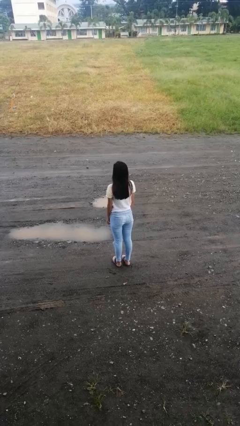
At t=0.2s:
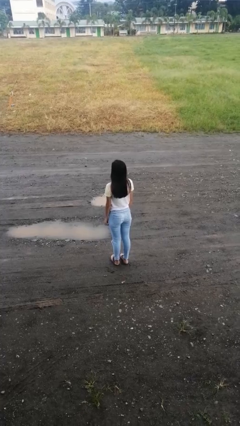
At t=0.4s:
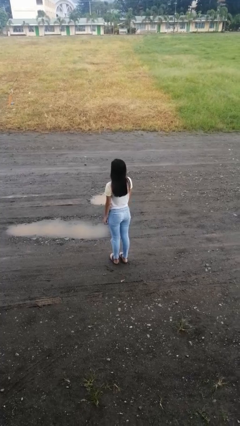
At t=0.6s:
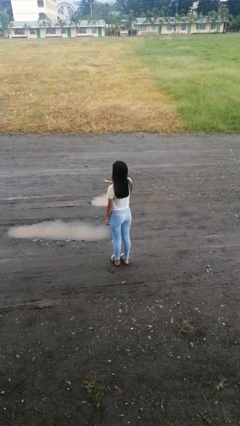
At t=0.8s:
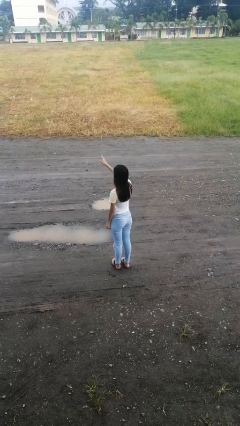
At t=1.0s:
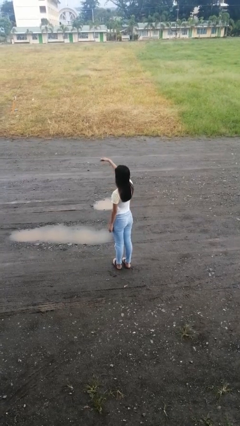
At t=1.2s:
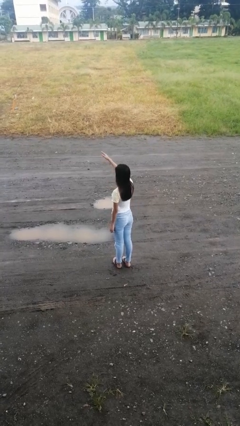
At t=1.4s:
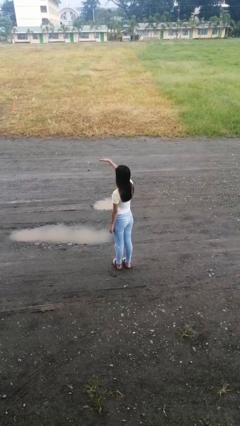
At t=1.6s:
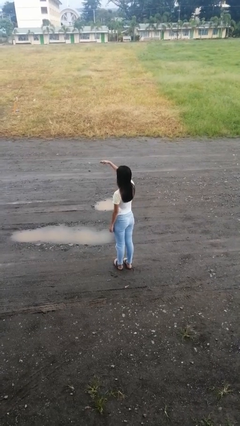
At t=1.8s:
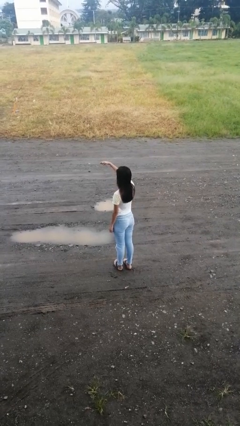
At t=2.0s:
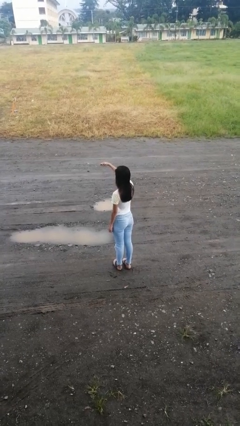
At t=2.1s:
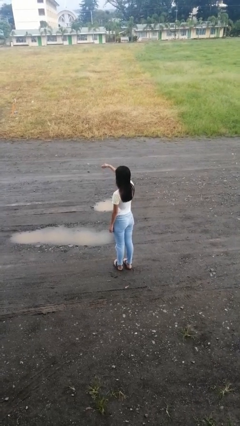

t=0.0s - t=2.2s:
person gestures come here

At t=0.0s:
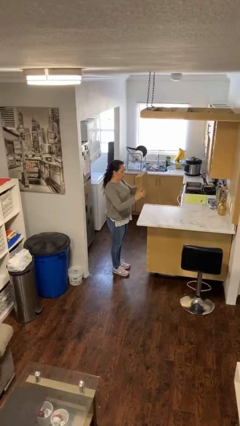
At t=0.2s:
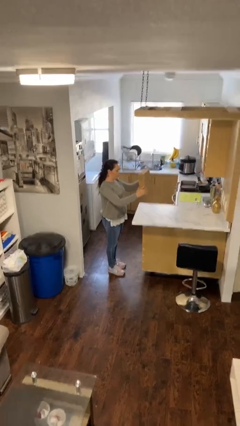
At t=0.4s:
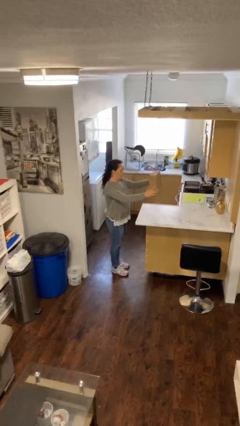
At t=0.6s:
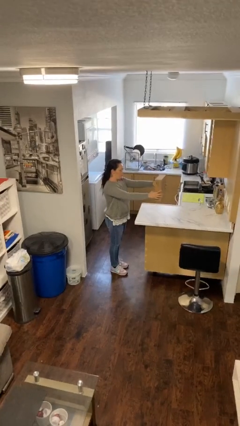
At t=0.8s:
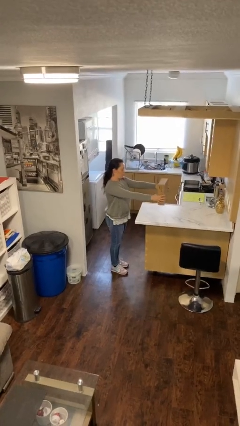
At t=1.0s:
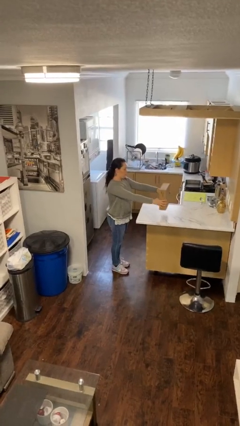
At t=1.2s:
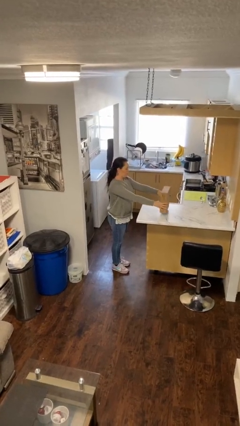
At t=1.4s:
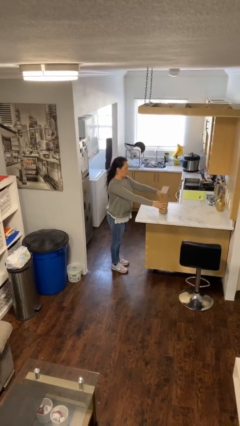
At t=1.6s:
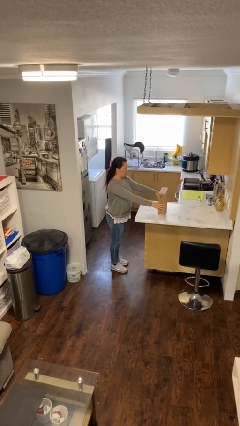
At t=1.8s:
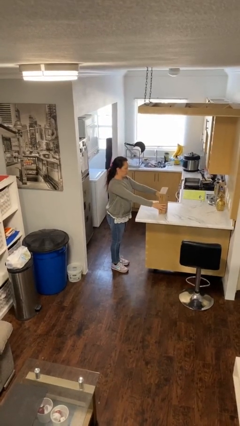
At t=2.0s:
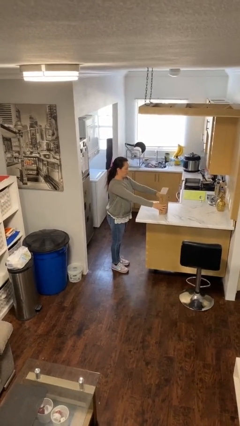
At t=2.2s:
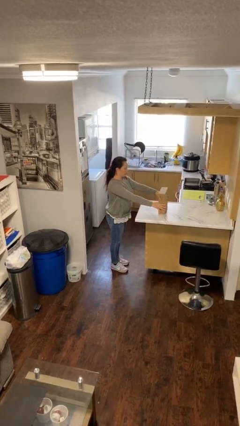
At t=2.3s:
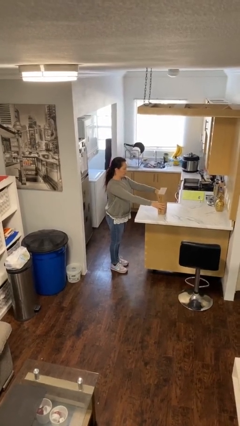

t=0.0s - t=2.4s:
person puts down object on table

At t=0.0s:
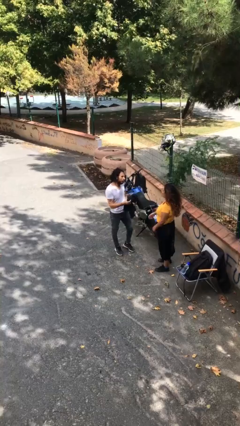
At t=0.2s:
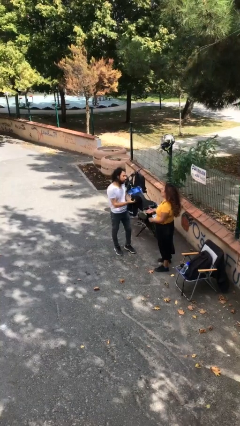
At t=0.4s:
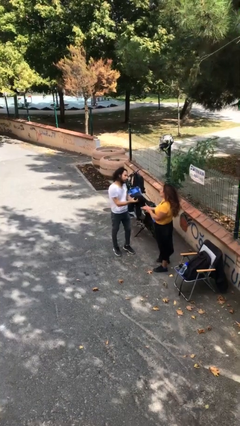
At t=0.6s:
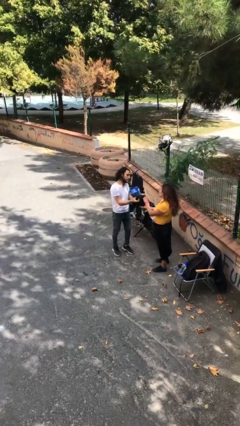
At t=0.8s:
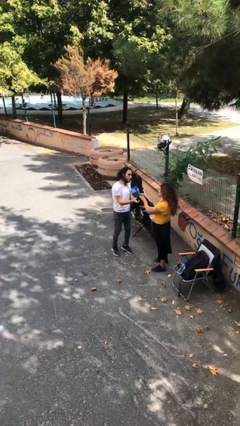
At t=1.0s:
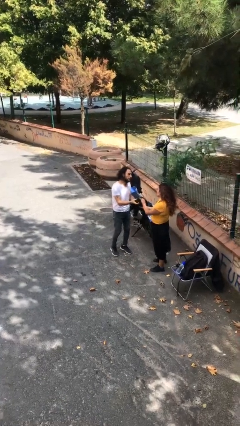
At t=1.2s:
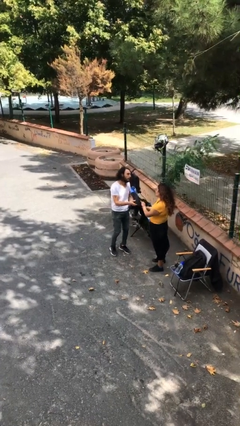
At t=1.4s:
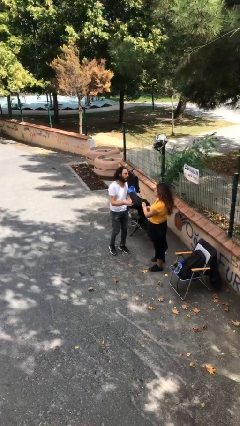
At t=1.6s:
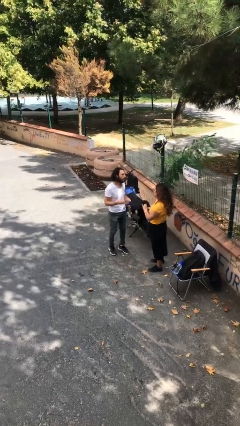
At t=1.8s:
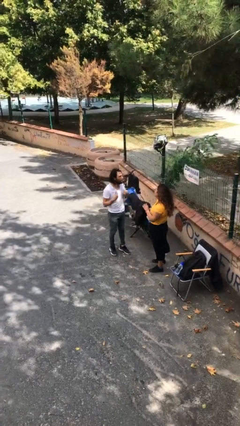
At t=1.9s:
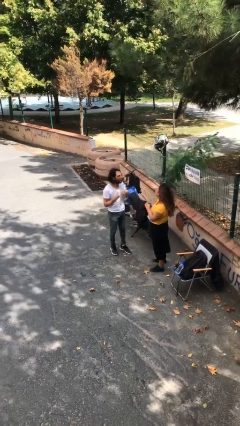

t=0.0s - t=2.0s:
person transfers object to person

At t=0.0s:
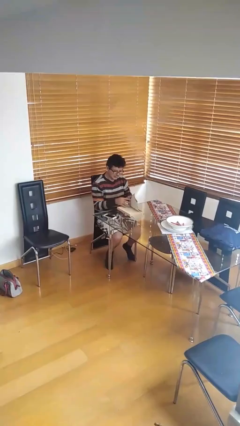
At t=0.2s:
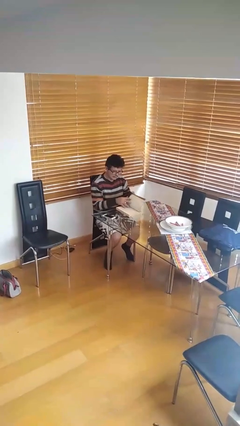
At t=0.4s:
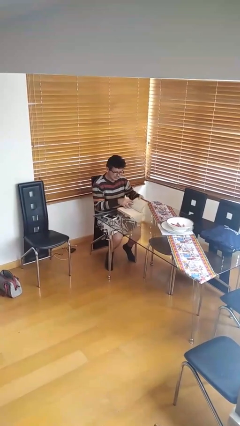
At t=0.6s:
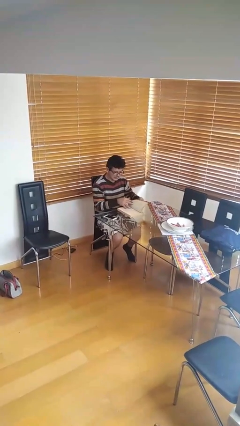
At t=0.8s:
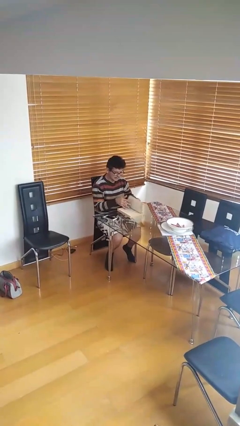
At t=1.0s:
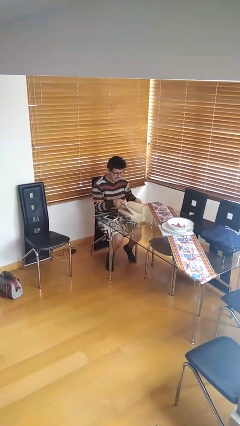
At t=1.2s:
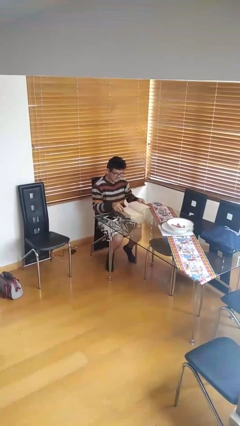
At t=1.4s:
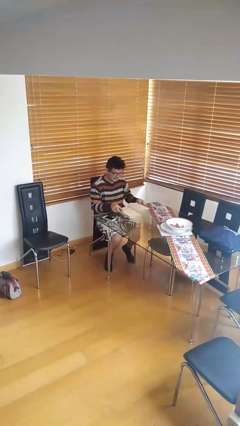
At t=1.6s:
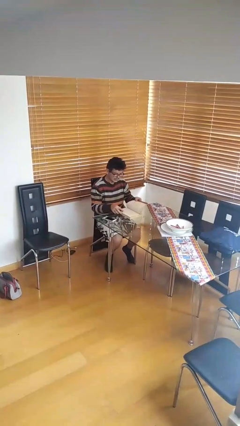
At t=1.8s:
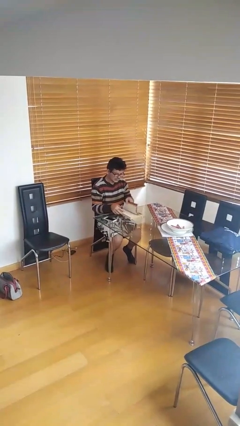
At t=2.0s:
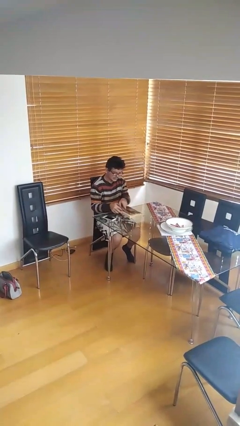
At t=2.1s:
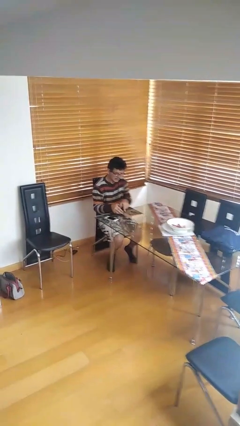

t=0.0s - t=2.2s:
person reads document

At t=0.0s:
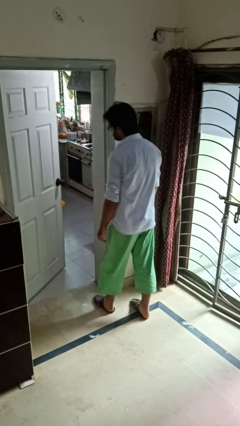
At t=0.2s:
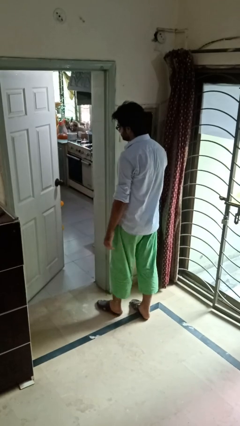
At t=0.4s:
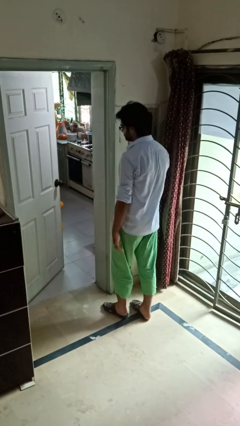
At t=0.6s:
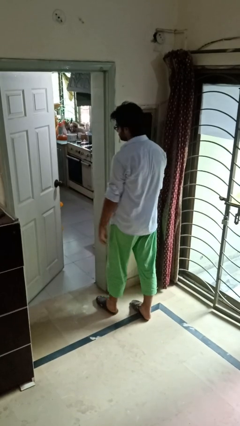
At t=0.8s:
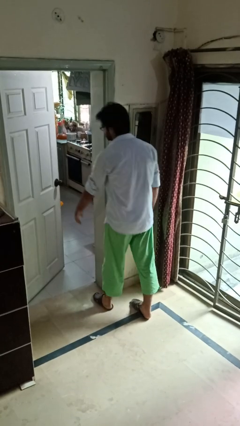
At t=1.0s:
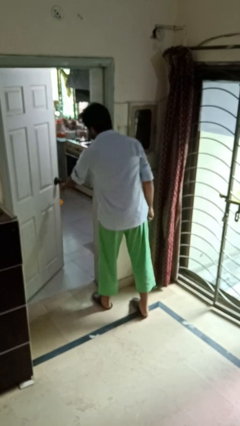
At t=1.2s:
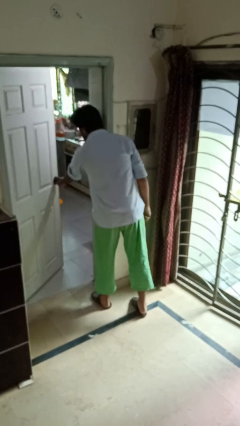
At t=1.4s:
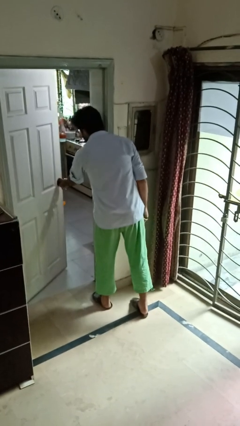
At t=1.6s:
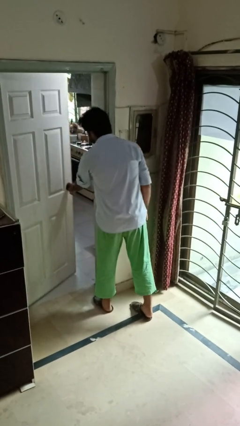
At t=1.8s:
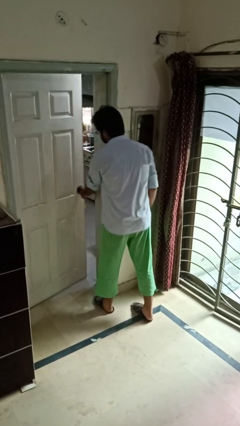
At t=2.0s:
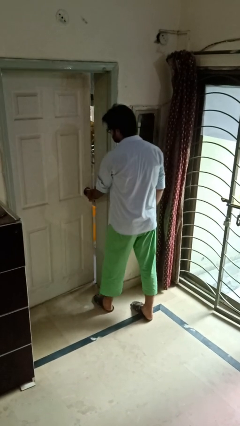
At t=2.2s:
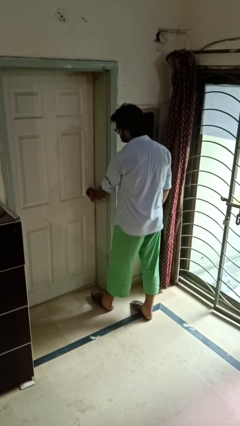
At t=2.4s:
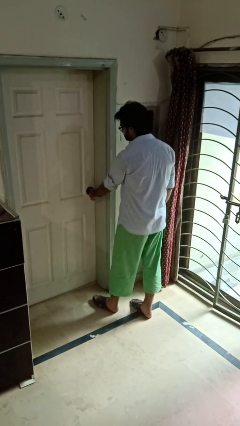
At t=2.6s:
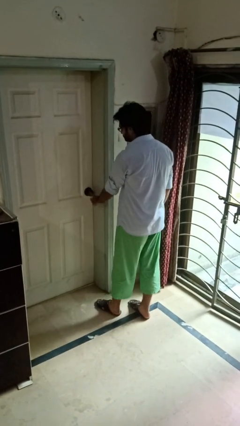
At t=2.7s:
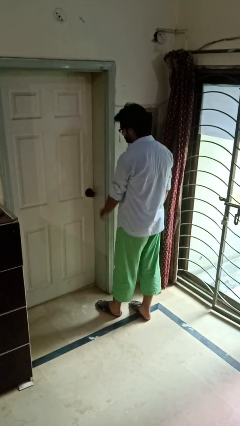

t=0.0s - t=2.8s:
person closes facility door

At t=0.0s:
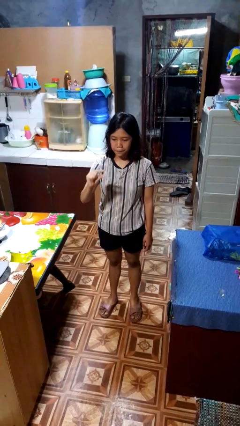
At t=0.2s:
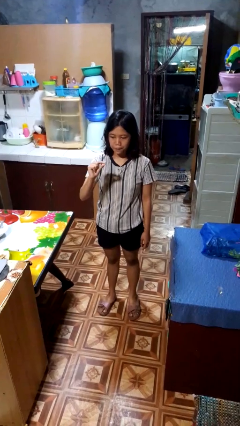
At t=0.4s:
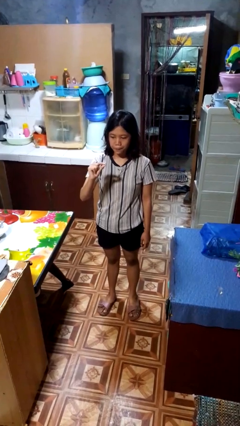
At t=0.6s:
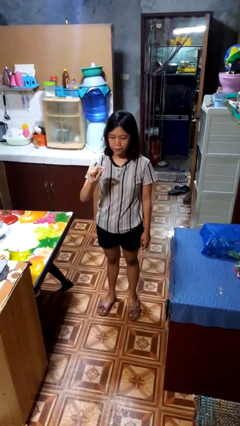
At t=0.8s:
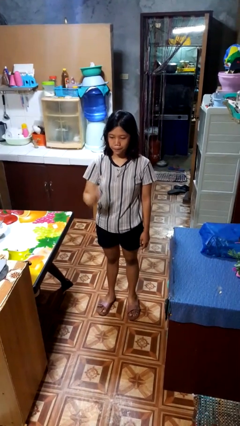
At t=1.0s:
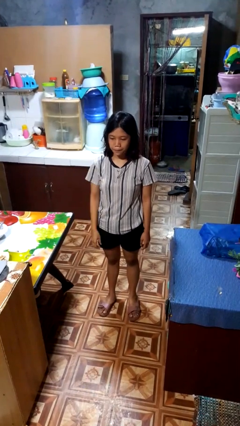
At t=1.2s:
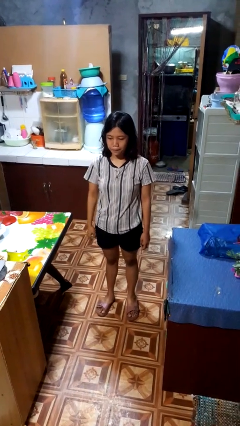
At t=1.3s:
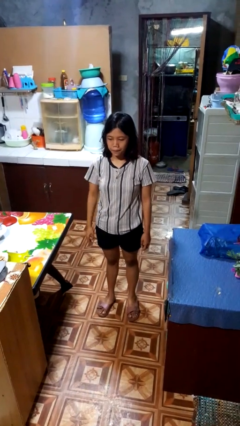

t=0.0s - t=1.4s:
person gestures zoom out

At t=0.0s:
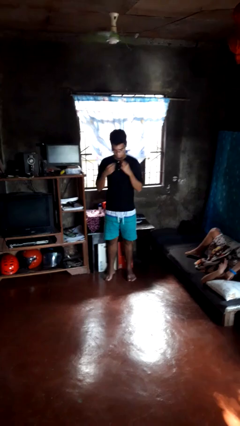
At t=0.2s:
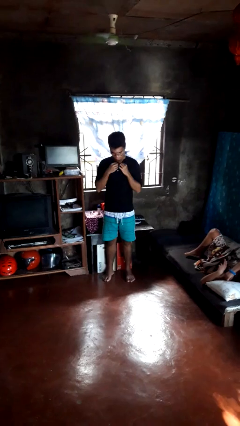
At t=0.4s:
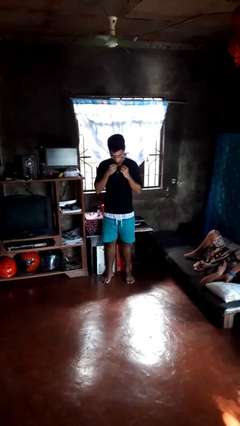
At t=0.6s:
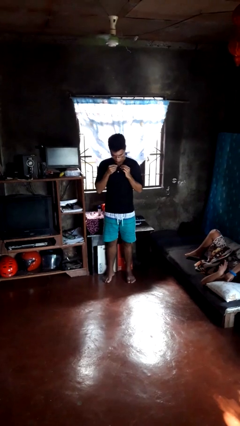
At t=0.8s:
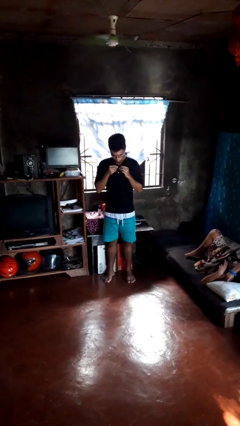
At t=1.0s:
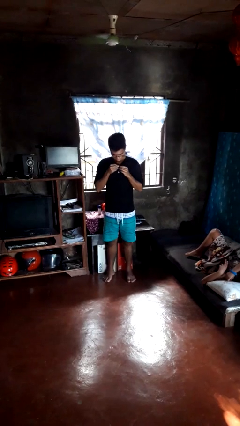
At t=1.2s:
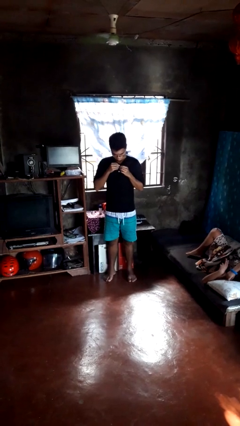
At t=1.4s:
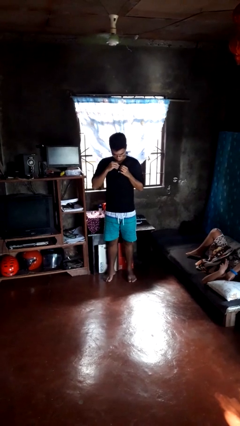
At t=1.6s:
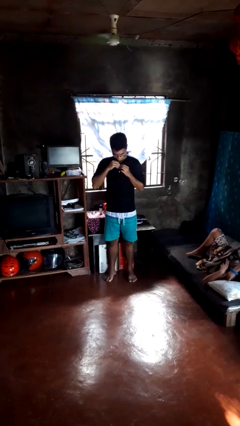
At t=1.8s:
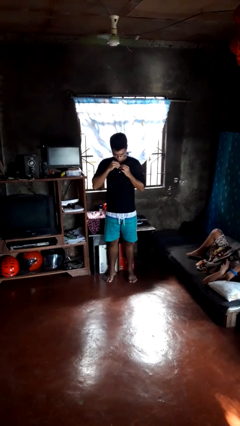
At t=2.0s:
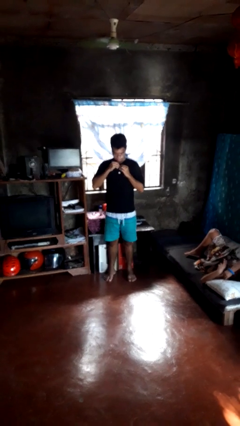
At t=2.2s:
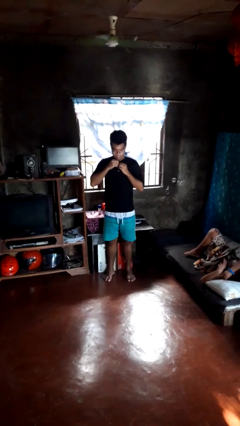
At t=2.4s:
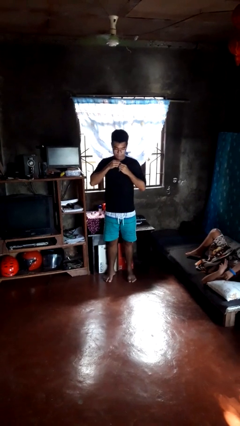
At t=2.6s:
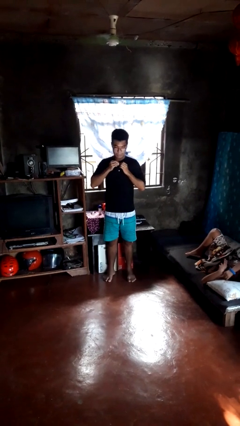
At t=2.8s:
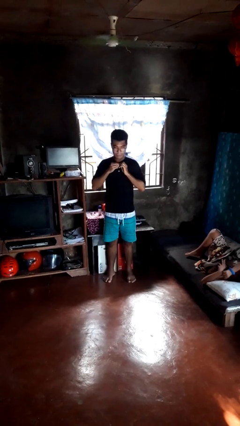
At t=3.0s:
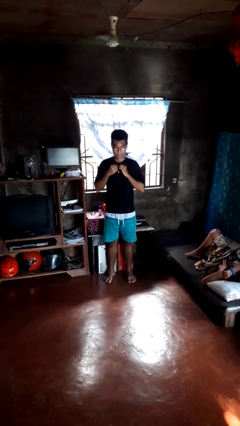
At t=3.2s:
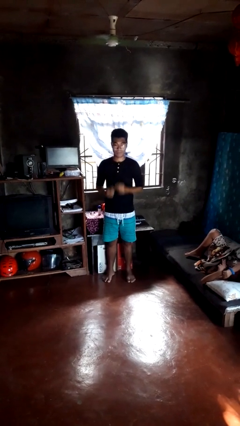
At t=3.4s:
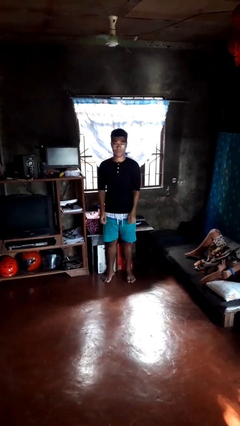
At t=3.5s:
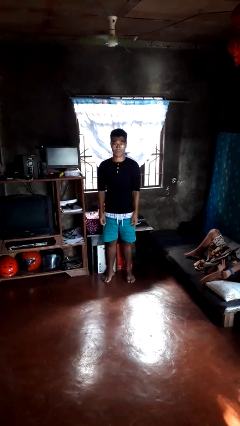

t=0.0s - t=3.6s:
person buttons shirt

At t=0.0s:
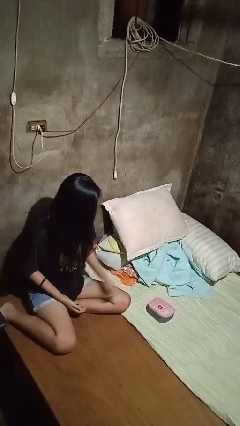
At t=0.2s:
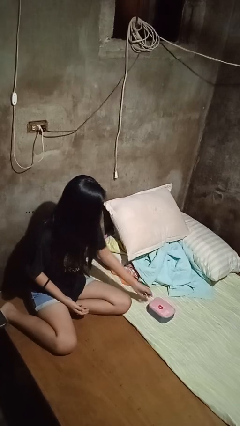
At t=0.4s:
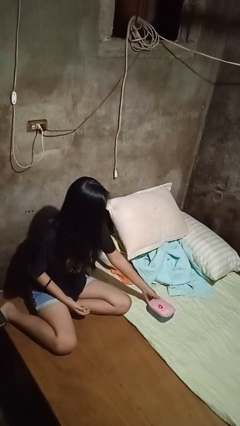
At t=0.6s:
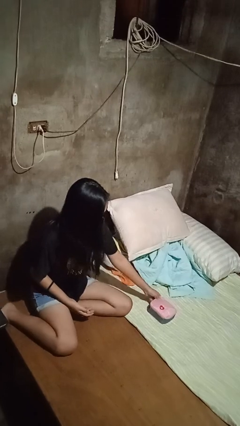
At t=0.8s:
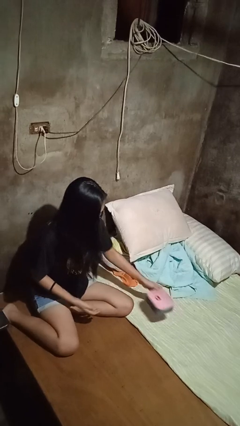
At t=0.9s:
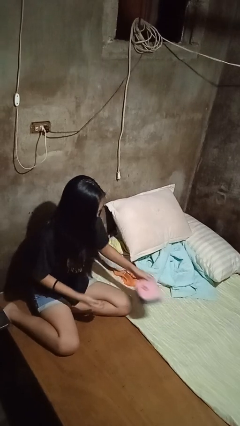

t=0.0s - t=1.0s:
person picks up object from bed
